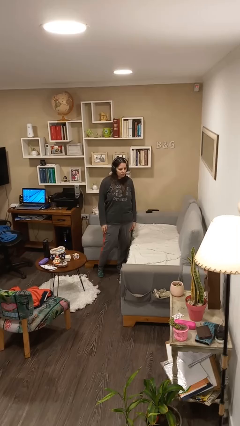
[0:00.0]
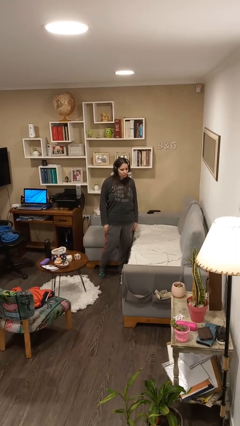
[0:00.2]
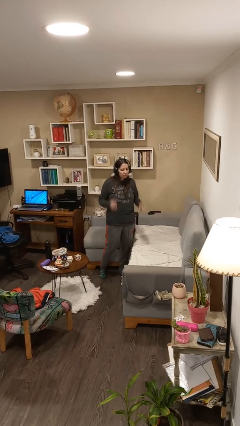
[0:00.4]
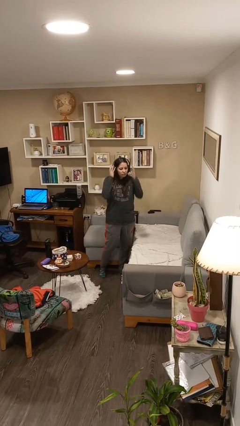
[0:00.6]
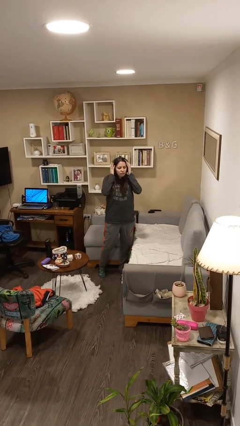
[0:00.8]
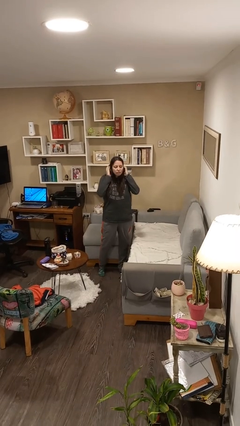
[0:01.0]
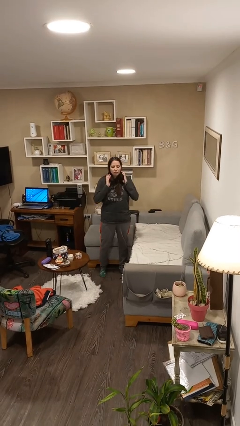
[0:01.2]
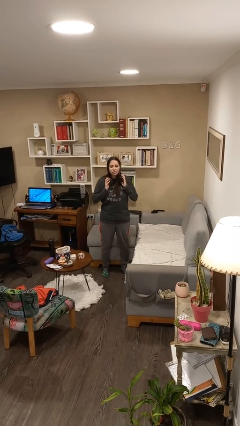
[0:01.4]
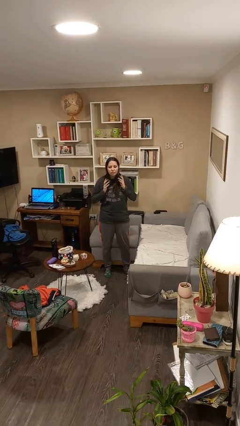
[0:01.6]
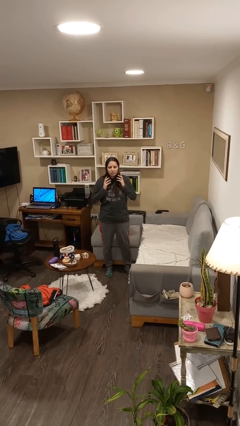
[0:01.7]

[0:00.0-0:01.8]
person takes off headphones

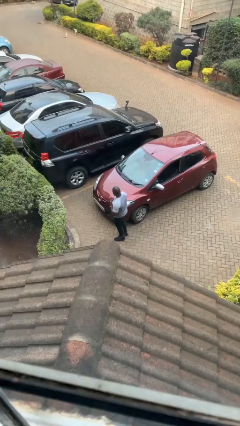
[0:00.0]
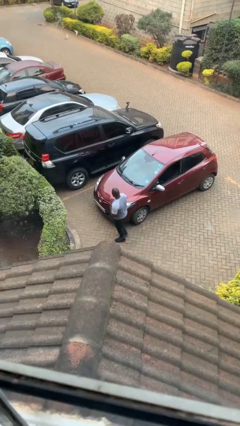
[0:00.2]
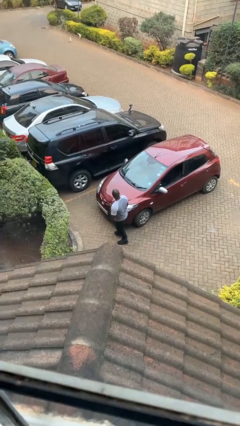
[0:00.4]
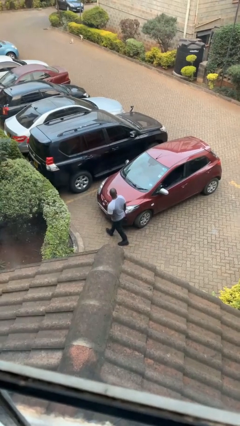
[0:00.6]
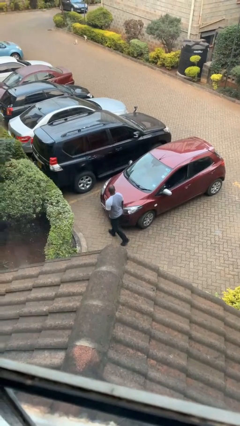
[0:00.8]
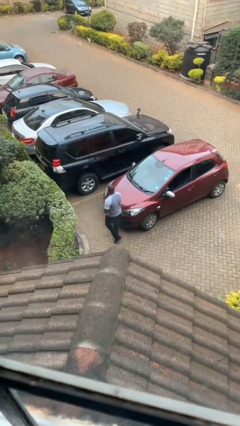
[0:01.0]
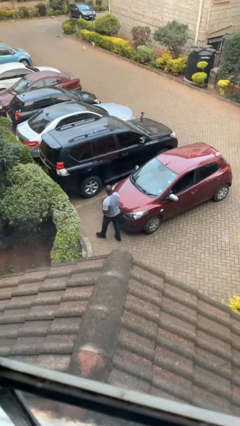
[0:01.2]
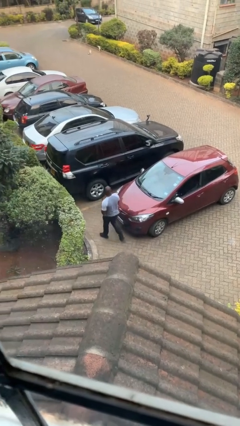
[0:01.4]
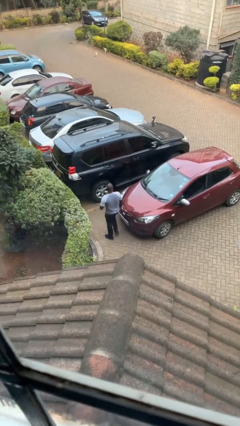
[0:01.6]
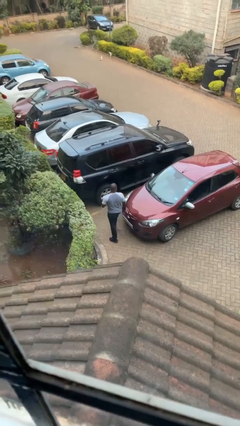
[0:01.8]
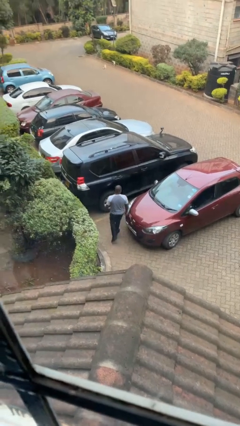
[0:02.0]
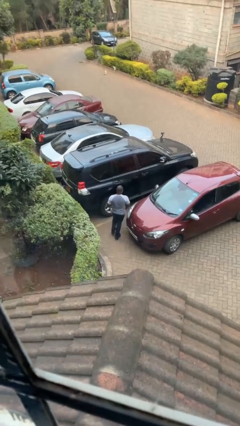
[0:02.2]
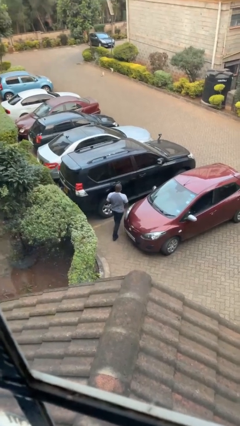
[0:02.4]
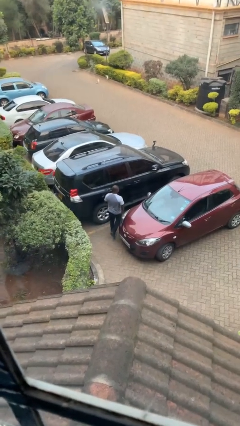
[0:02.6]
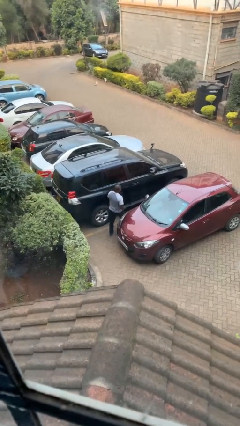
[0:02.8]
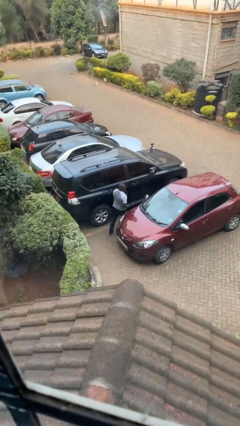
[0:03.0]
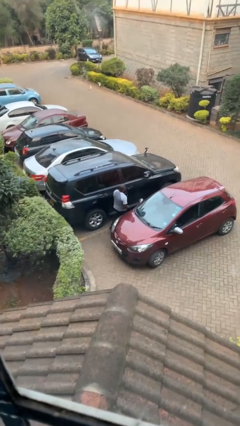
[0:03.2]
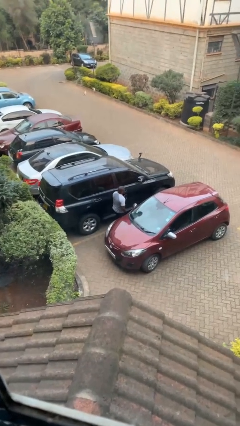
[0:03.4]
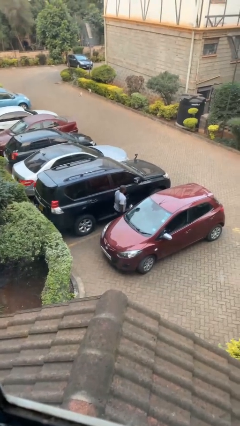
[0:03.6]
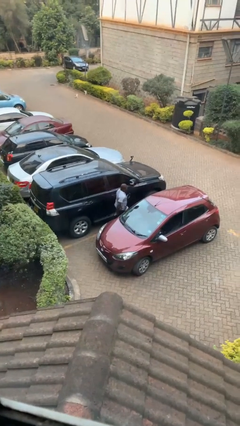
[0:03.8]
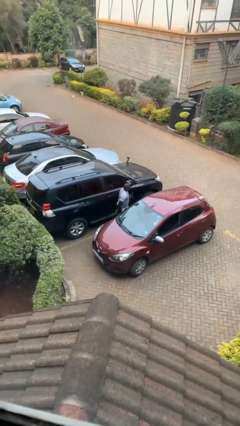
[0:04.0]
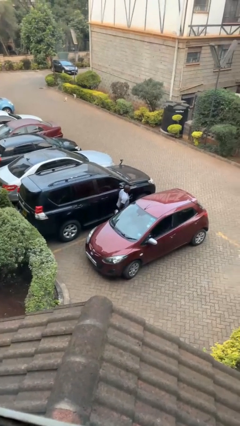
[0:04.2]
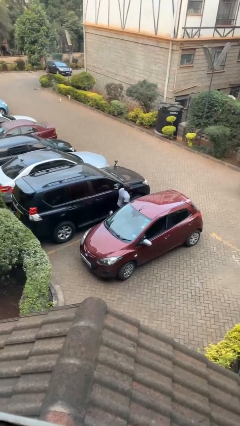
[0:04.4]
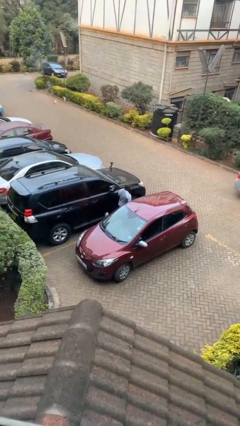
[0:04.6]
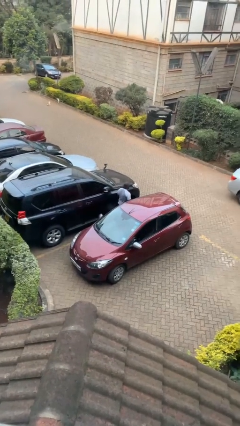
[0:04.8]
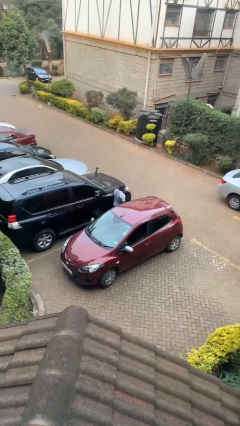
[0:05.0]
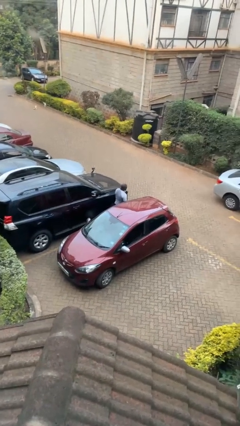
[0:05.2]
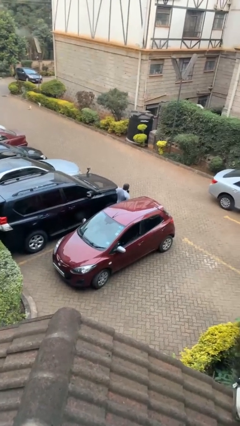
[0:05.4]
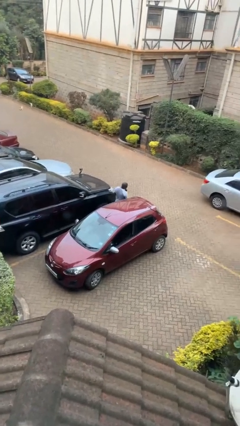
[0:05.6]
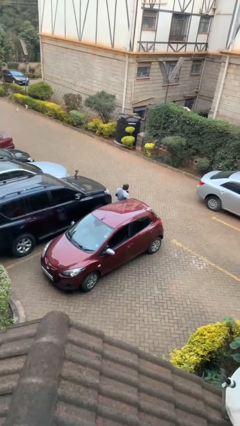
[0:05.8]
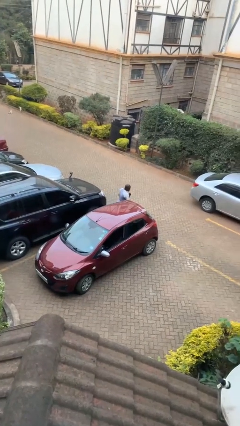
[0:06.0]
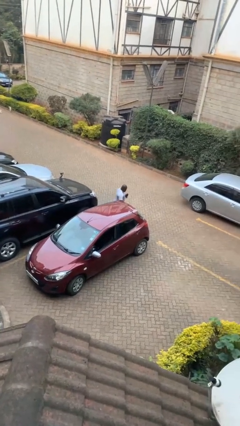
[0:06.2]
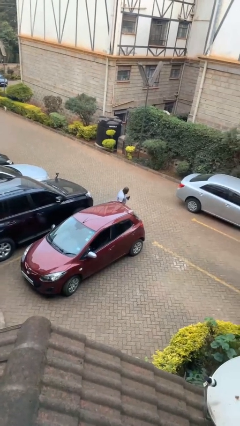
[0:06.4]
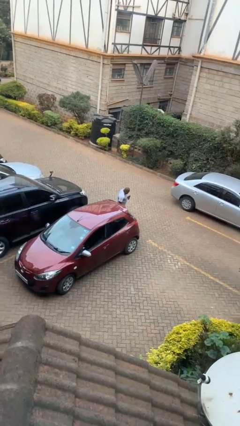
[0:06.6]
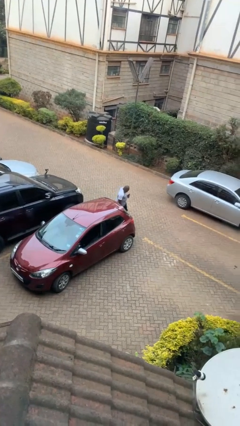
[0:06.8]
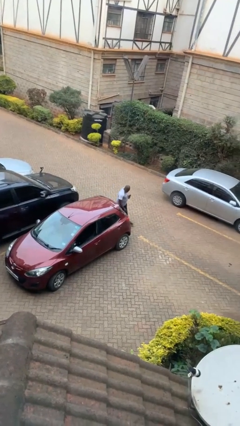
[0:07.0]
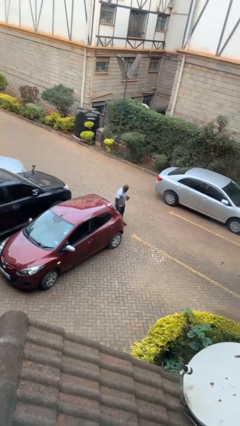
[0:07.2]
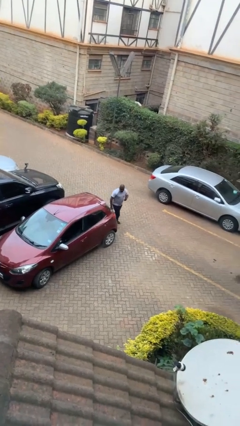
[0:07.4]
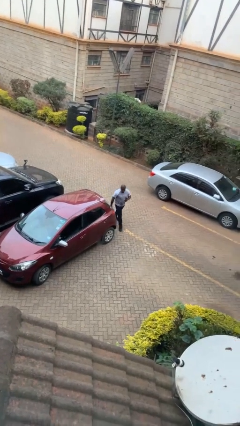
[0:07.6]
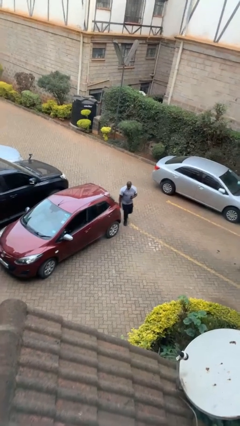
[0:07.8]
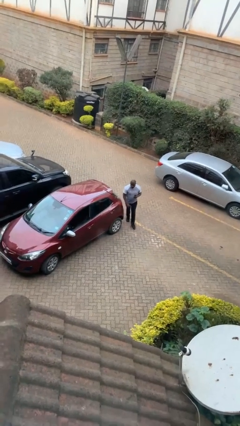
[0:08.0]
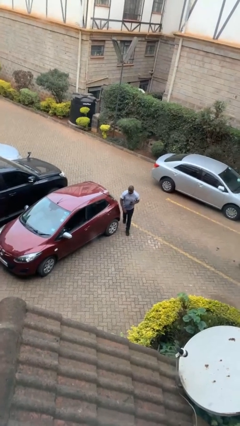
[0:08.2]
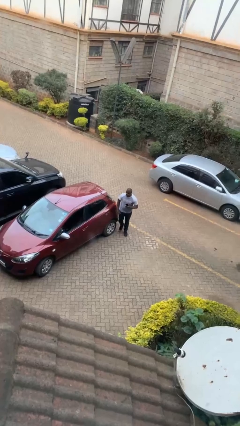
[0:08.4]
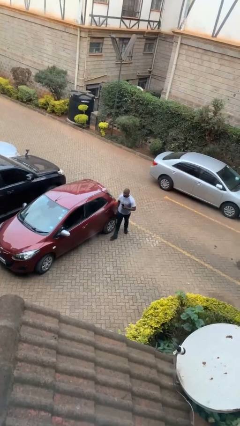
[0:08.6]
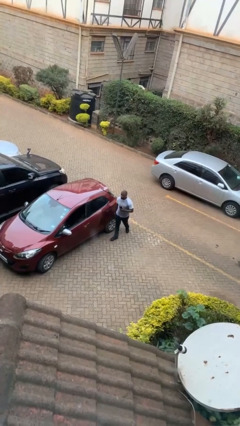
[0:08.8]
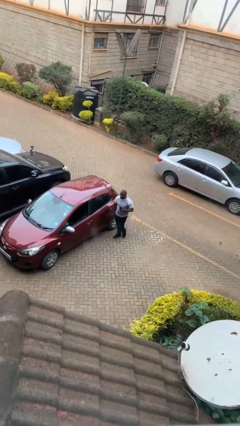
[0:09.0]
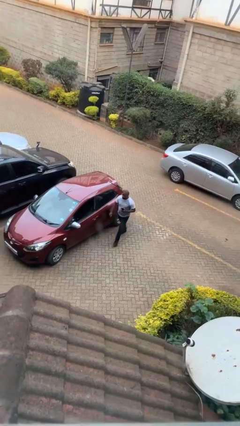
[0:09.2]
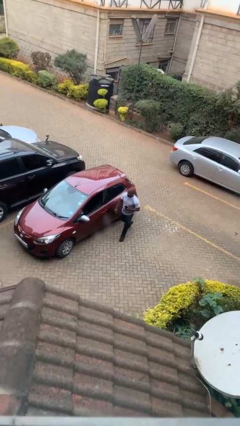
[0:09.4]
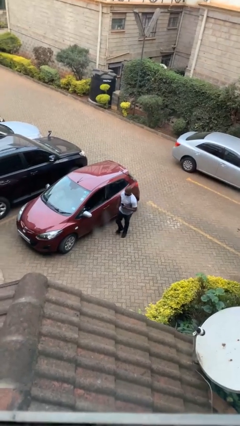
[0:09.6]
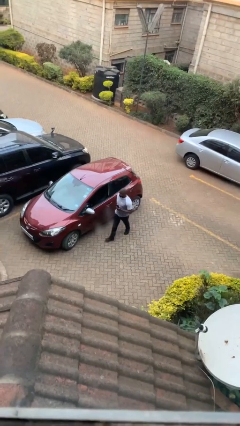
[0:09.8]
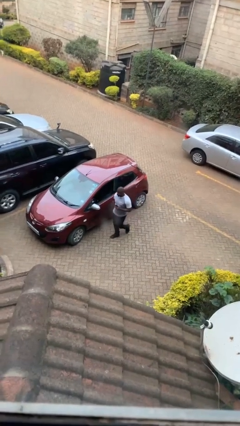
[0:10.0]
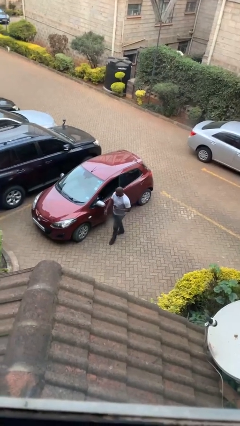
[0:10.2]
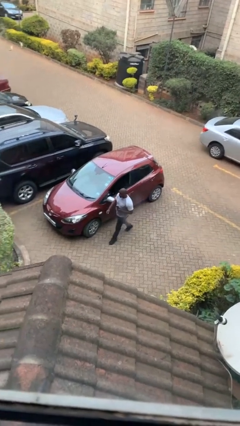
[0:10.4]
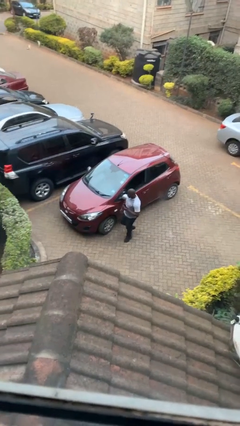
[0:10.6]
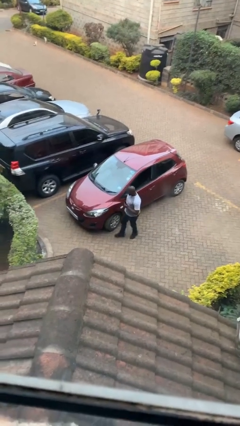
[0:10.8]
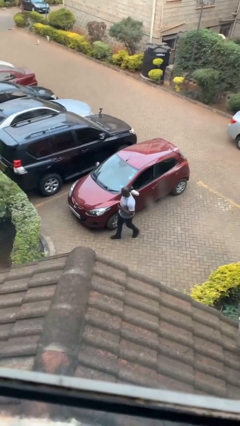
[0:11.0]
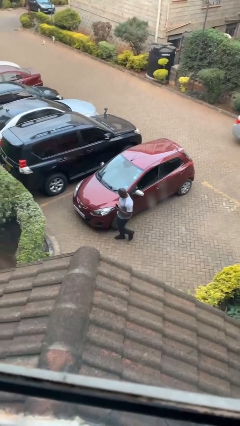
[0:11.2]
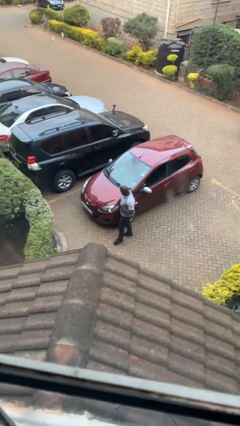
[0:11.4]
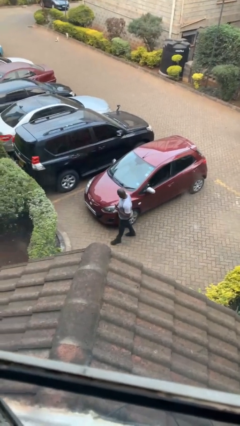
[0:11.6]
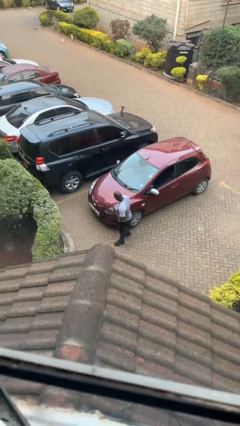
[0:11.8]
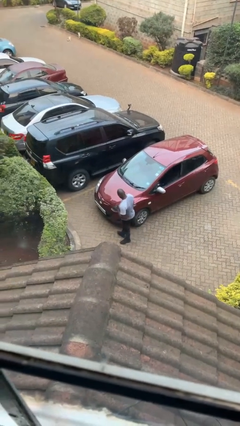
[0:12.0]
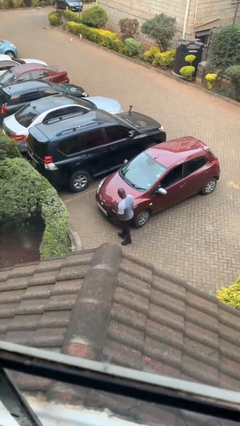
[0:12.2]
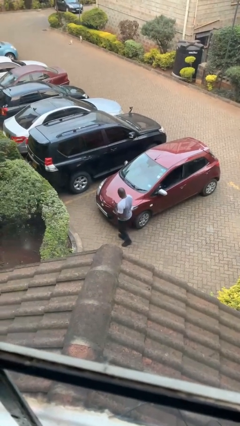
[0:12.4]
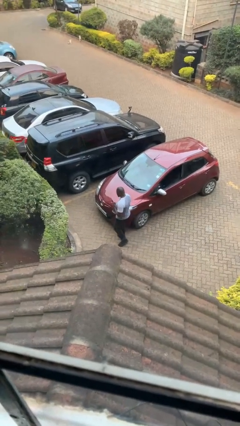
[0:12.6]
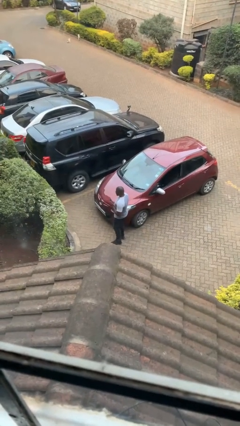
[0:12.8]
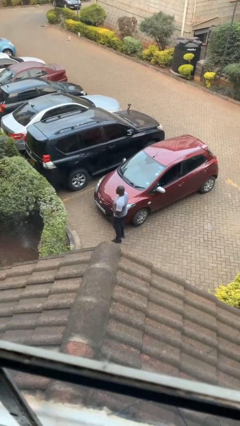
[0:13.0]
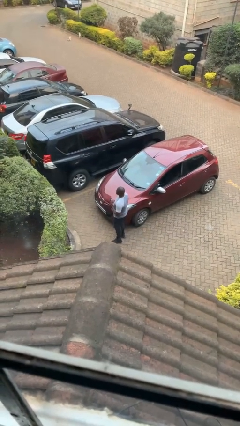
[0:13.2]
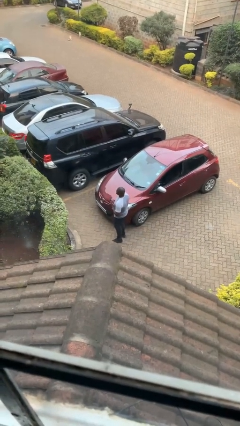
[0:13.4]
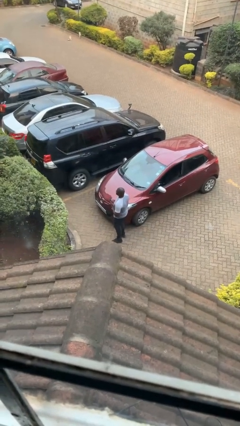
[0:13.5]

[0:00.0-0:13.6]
person walks around car

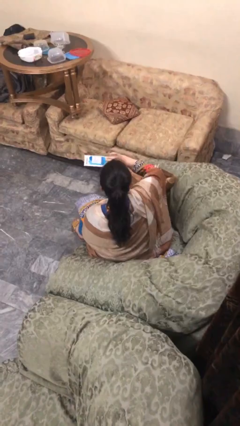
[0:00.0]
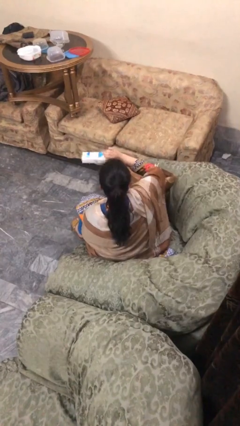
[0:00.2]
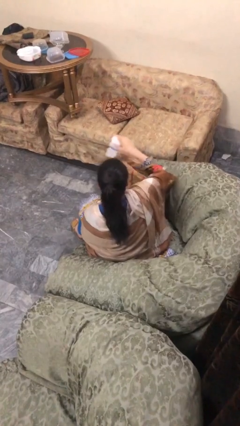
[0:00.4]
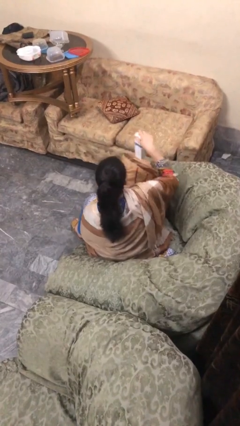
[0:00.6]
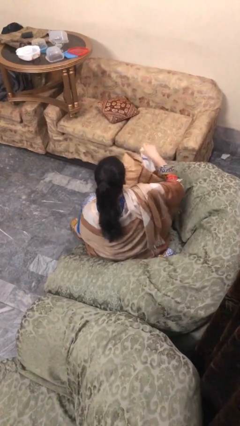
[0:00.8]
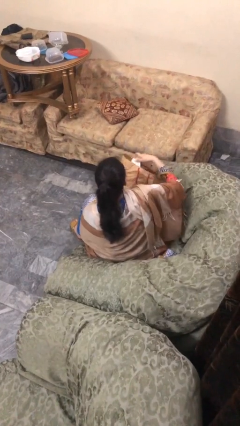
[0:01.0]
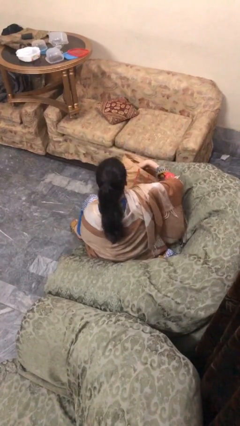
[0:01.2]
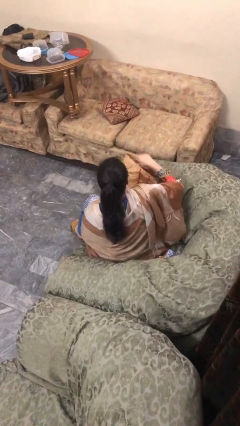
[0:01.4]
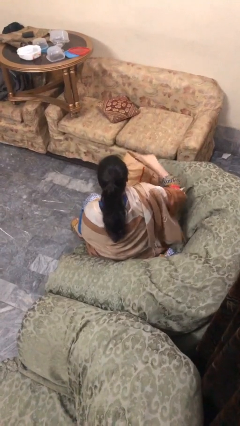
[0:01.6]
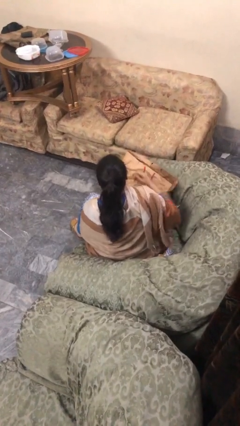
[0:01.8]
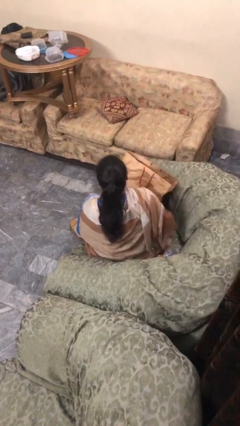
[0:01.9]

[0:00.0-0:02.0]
person puts object into bag

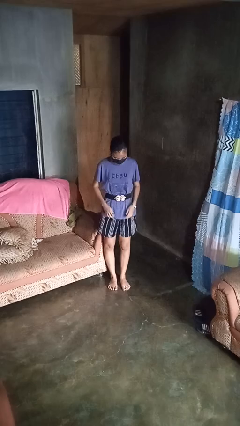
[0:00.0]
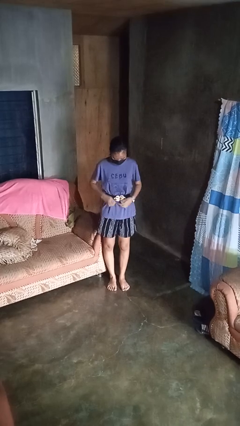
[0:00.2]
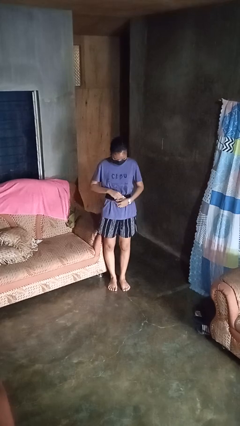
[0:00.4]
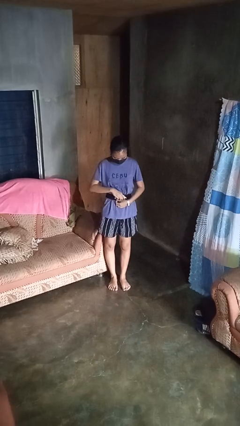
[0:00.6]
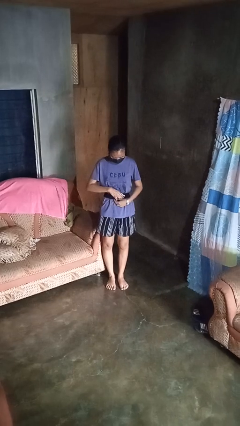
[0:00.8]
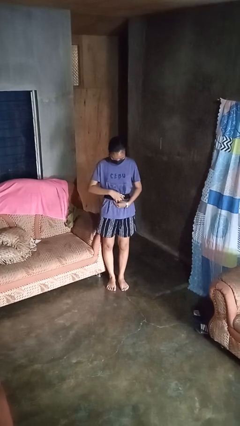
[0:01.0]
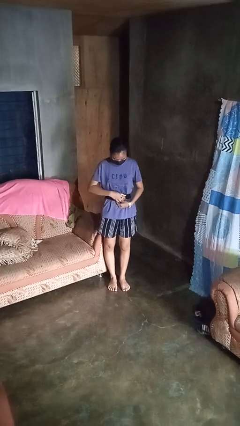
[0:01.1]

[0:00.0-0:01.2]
person takes off belt
